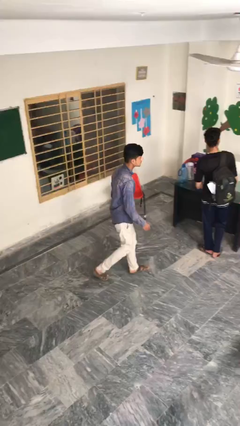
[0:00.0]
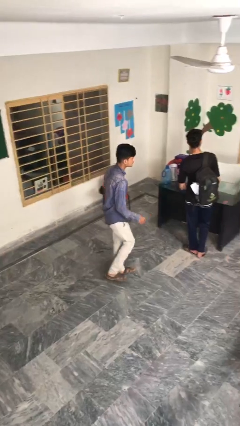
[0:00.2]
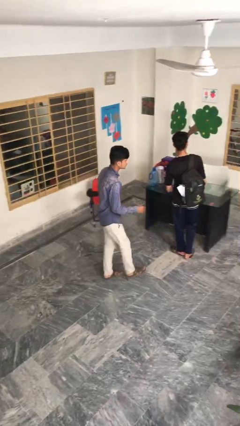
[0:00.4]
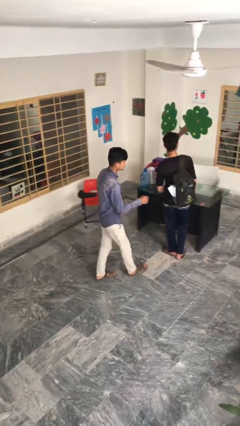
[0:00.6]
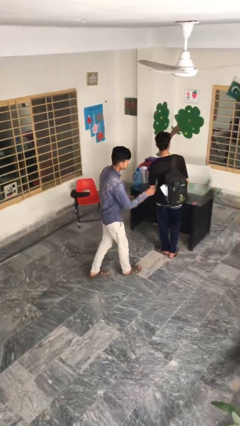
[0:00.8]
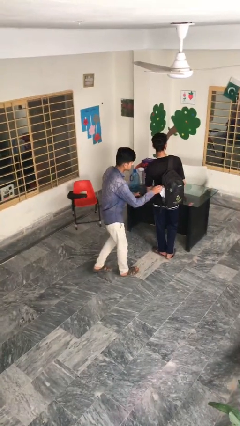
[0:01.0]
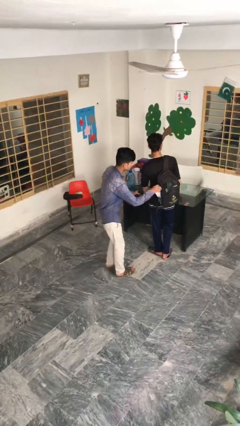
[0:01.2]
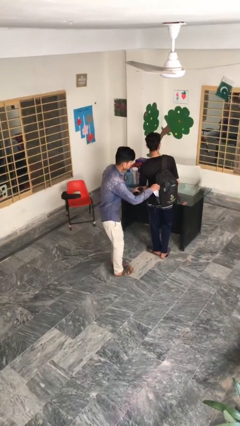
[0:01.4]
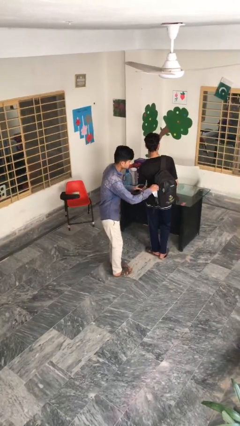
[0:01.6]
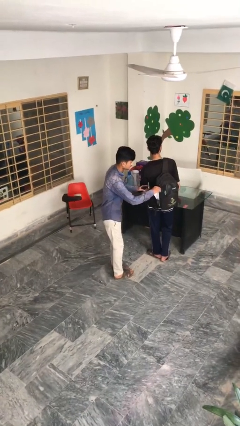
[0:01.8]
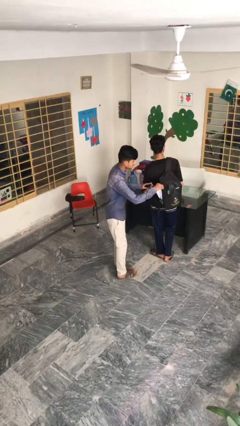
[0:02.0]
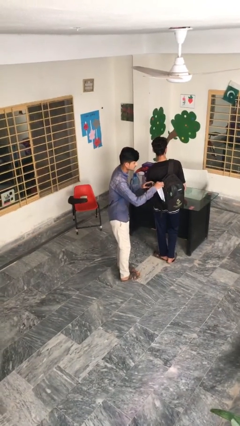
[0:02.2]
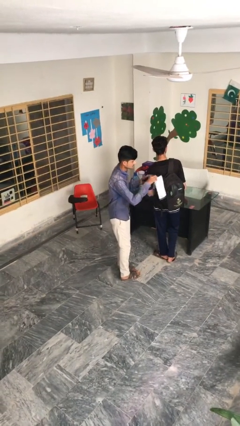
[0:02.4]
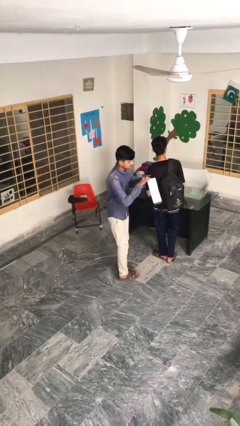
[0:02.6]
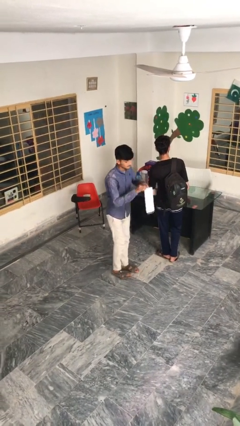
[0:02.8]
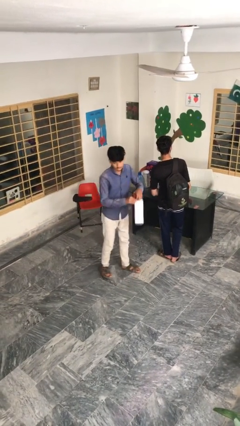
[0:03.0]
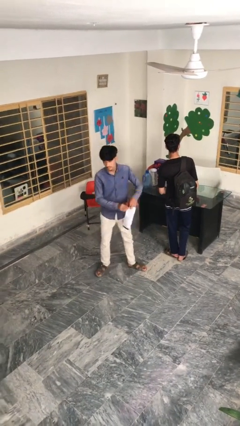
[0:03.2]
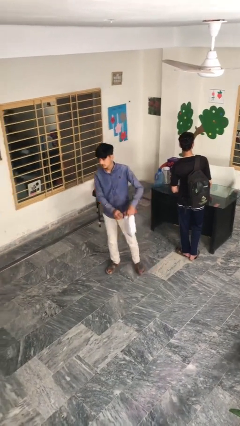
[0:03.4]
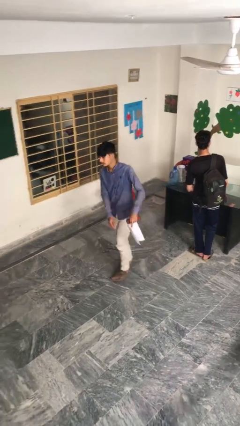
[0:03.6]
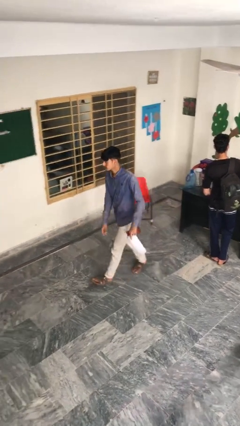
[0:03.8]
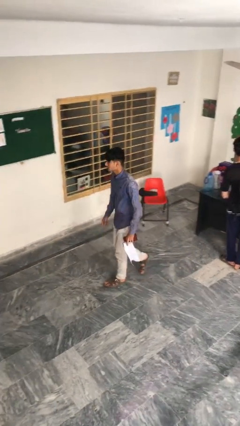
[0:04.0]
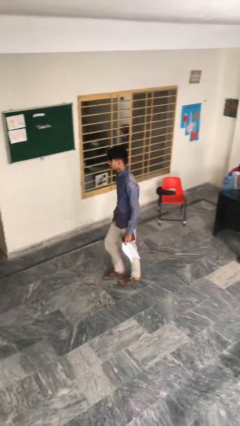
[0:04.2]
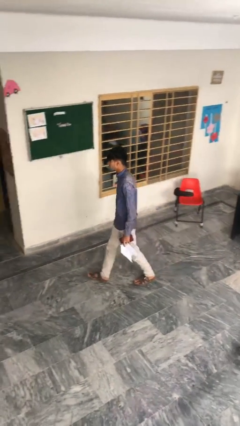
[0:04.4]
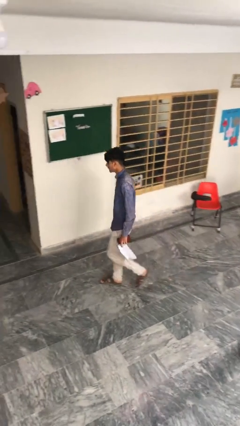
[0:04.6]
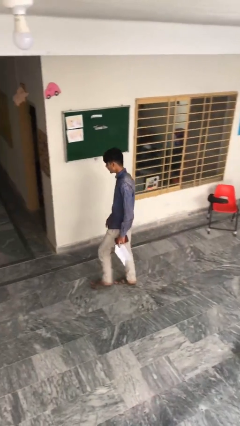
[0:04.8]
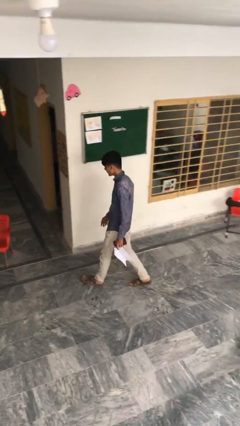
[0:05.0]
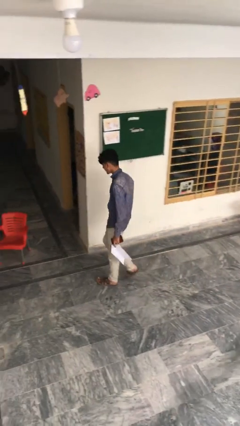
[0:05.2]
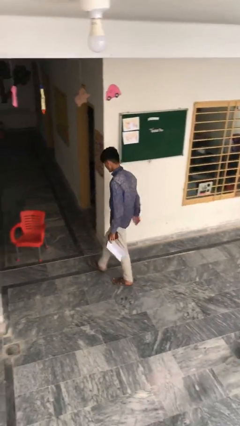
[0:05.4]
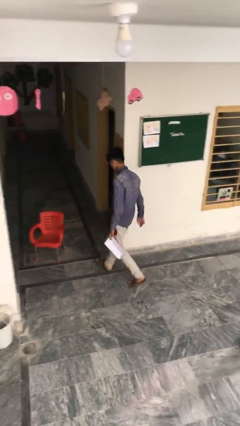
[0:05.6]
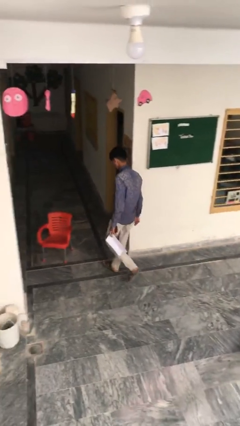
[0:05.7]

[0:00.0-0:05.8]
person steals object from person

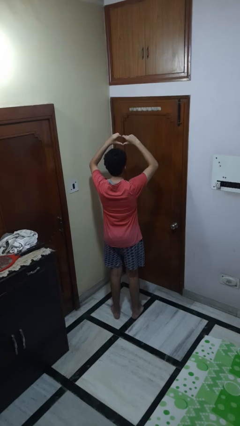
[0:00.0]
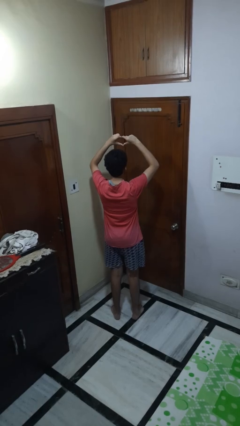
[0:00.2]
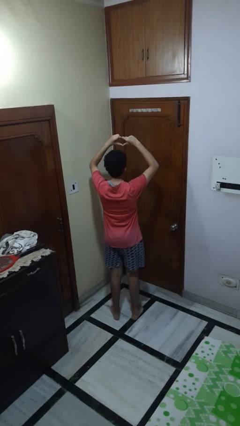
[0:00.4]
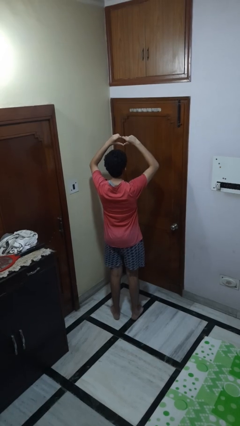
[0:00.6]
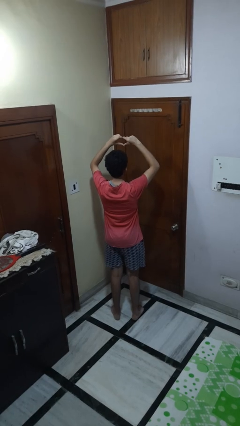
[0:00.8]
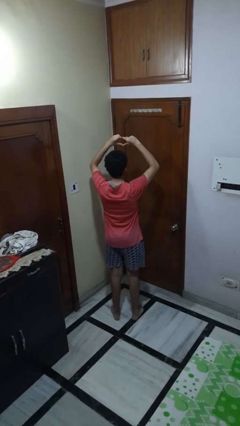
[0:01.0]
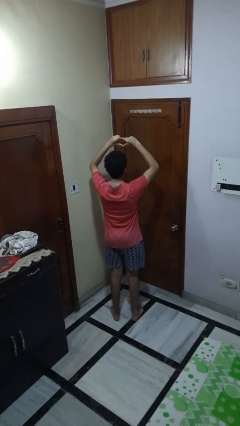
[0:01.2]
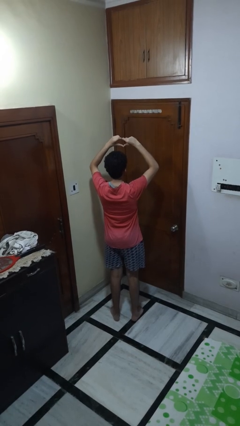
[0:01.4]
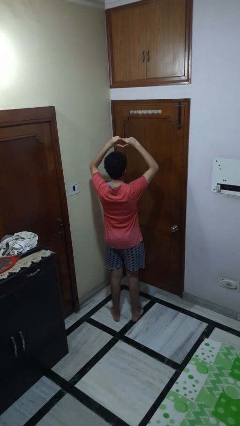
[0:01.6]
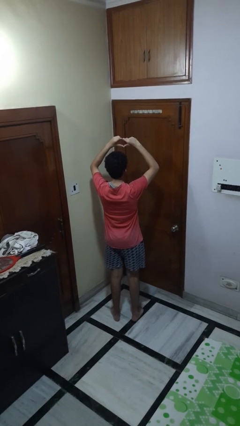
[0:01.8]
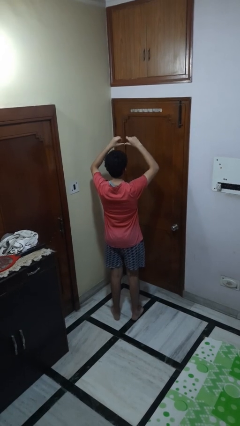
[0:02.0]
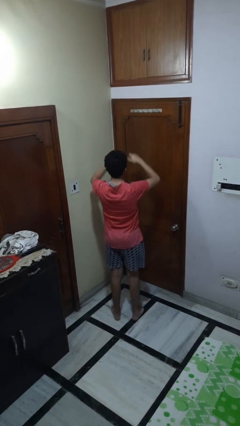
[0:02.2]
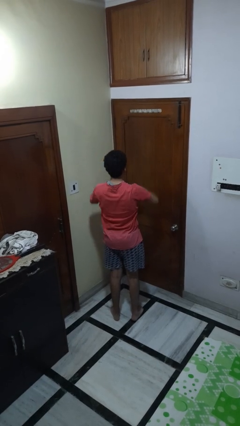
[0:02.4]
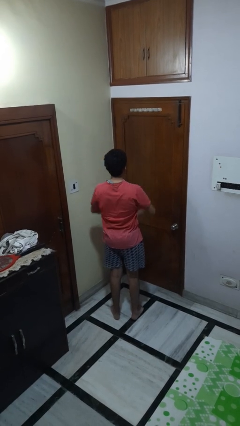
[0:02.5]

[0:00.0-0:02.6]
person gestures heart

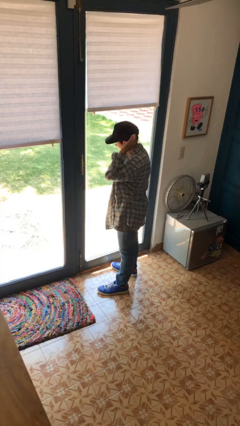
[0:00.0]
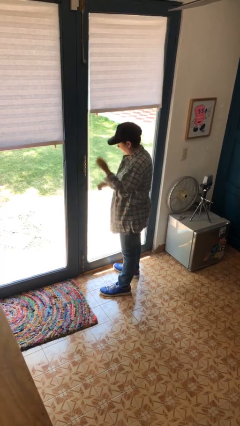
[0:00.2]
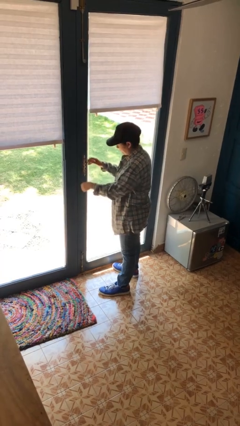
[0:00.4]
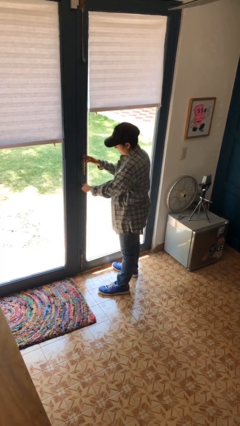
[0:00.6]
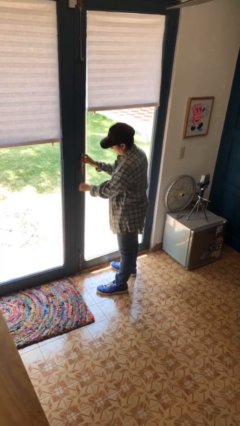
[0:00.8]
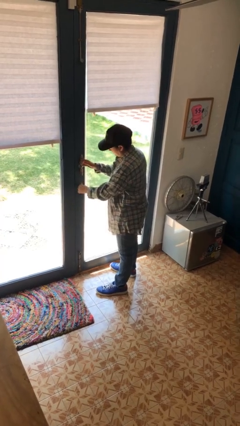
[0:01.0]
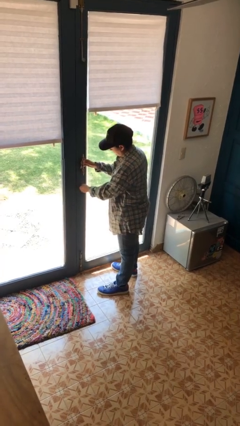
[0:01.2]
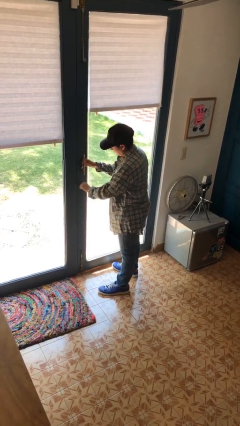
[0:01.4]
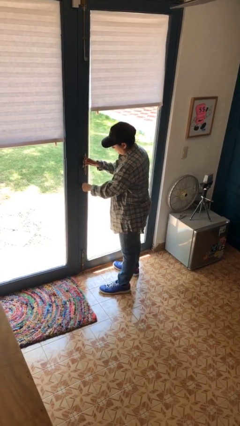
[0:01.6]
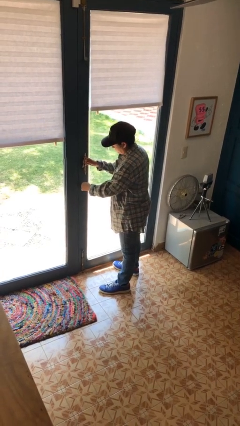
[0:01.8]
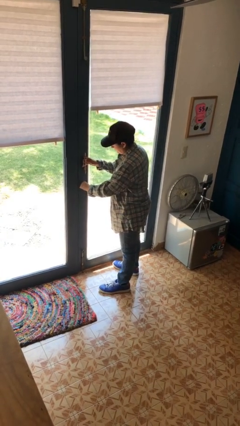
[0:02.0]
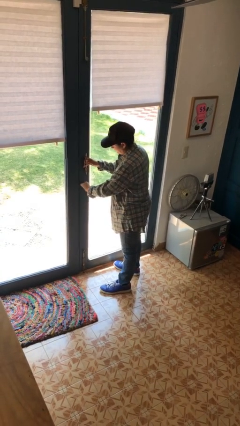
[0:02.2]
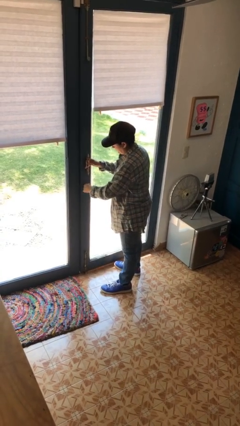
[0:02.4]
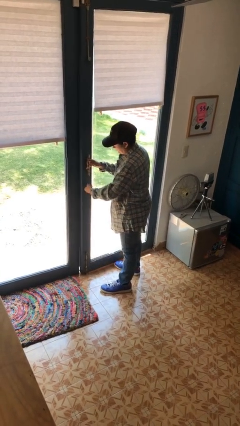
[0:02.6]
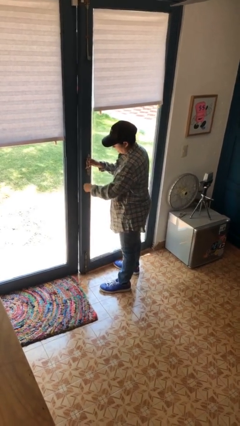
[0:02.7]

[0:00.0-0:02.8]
person unlocks door with keys

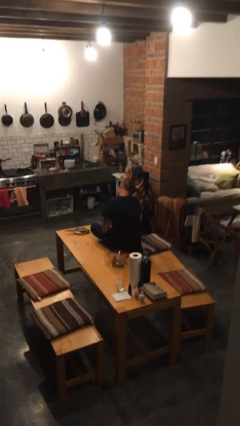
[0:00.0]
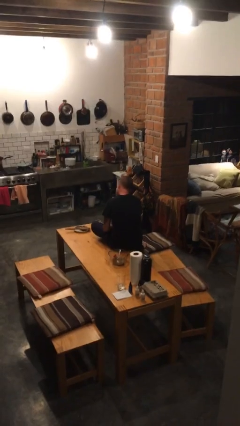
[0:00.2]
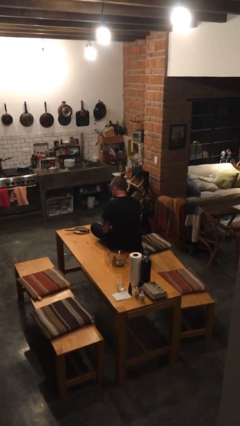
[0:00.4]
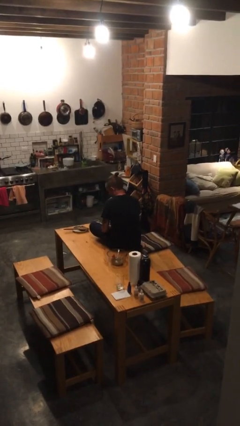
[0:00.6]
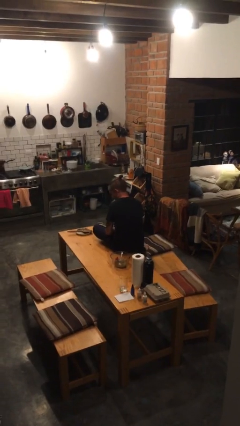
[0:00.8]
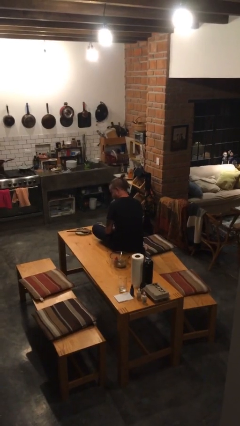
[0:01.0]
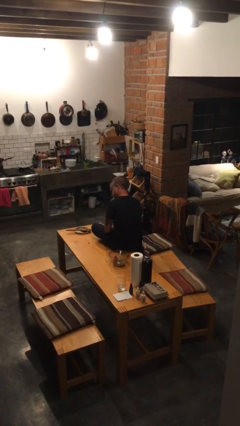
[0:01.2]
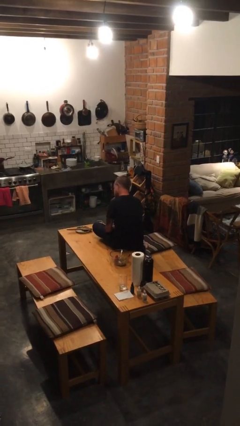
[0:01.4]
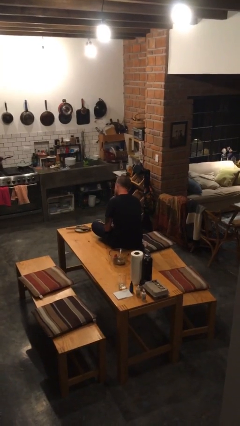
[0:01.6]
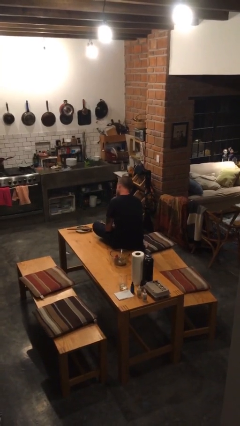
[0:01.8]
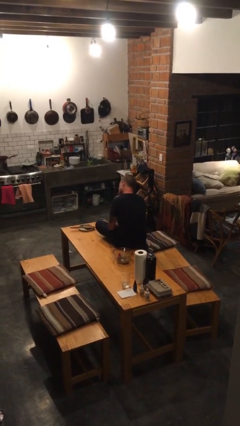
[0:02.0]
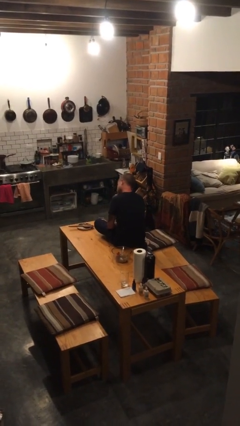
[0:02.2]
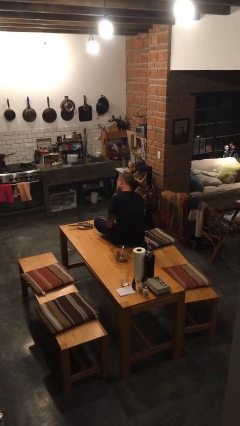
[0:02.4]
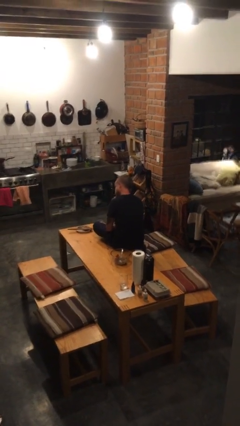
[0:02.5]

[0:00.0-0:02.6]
person strokes chin

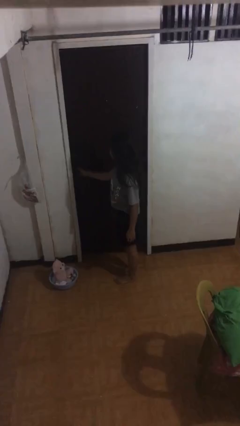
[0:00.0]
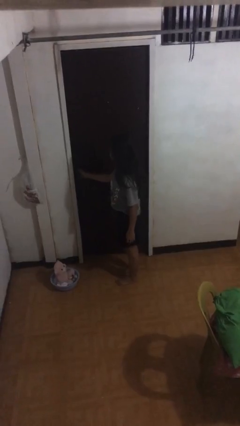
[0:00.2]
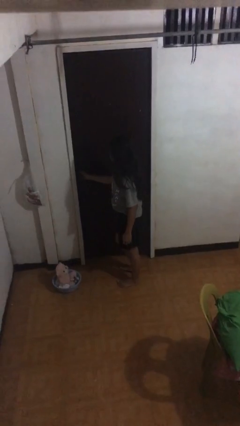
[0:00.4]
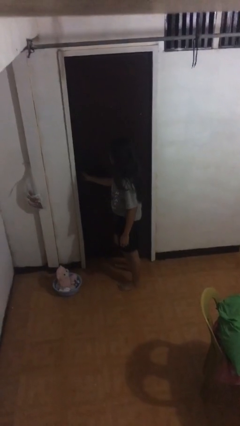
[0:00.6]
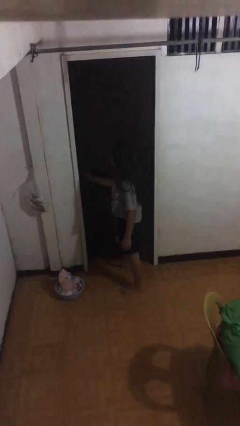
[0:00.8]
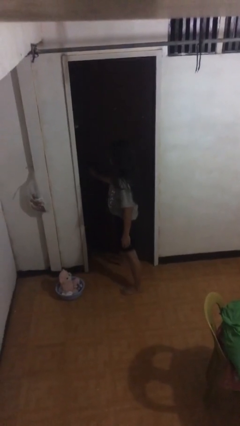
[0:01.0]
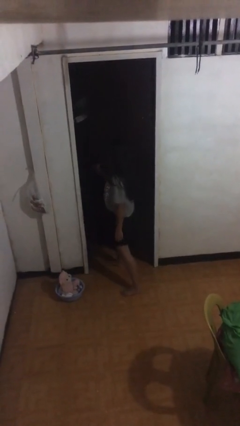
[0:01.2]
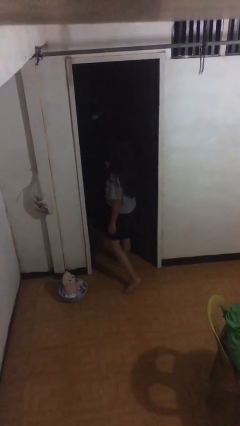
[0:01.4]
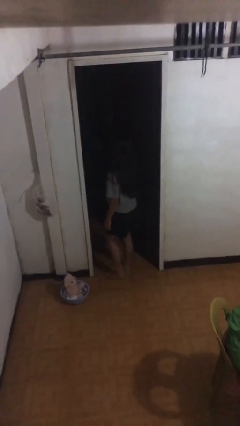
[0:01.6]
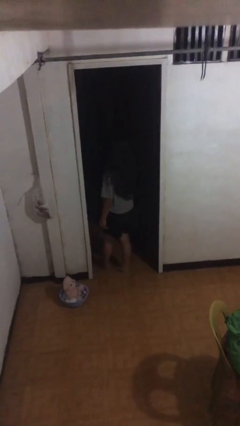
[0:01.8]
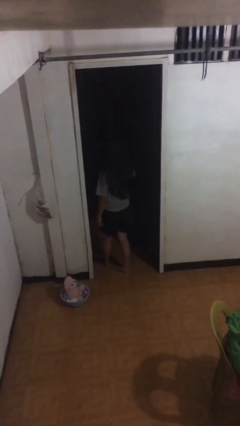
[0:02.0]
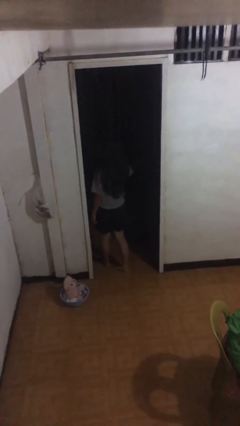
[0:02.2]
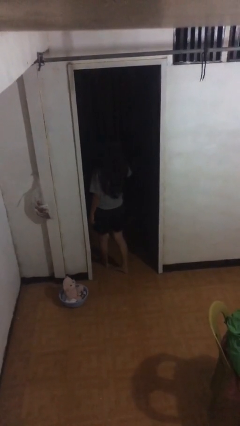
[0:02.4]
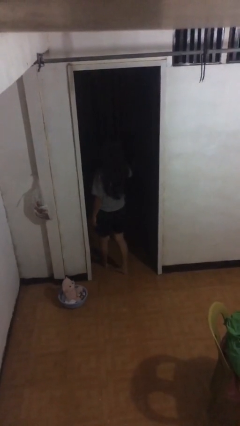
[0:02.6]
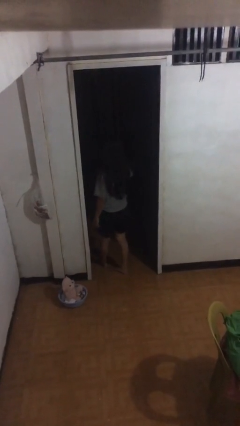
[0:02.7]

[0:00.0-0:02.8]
person opens facility door

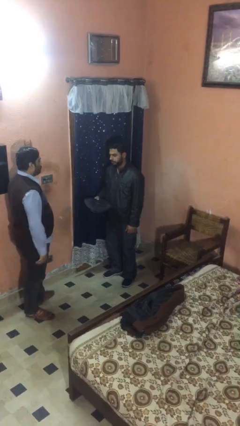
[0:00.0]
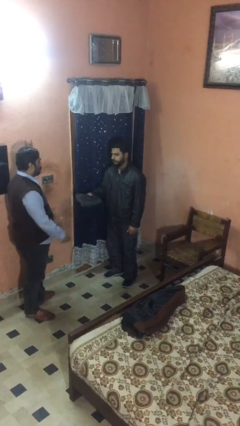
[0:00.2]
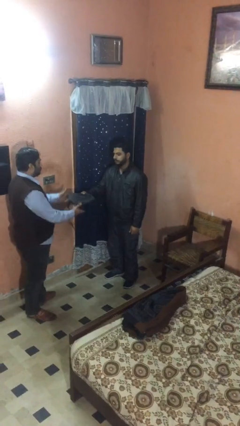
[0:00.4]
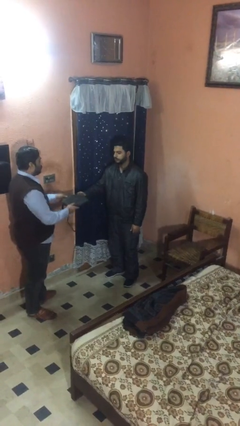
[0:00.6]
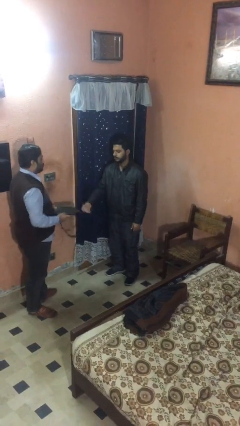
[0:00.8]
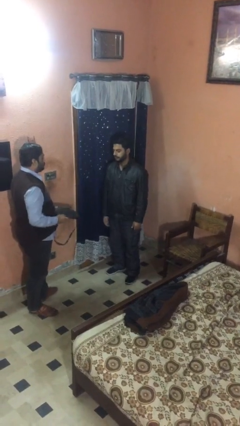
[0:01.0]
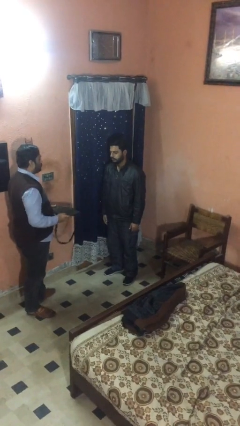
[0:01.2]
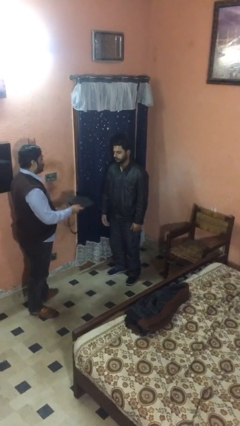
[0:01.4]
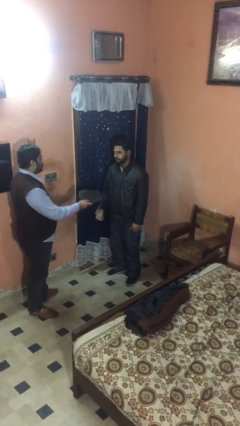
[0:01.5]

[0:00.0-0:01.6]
person transfers object to person
